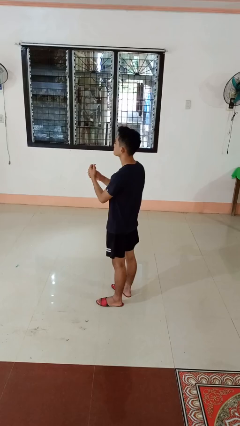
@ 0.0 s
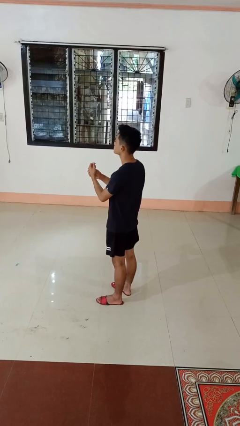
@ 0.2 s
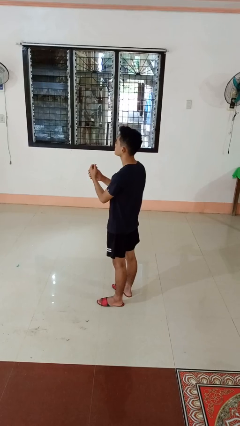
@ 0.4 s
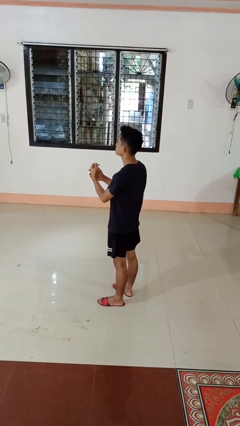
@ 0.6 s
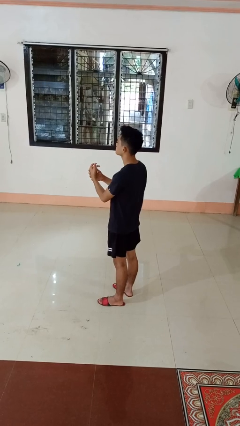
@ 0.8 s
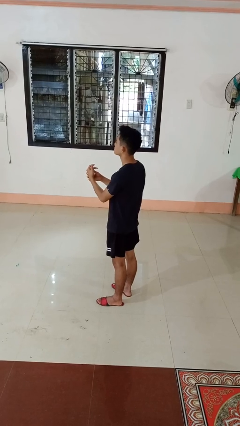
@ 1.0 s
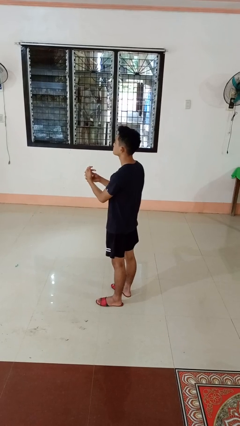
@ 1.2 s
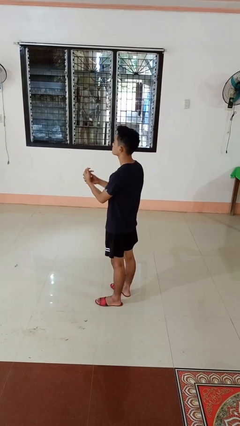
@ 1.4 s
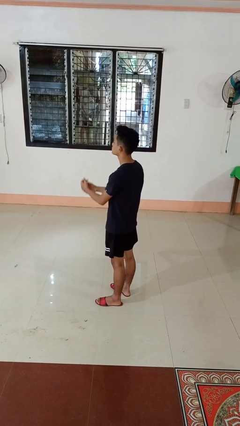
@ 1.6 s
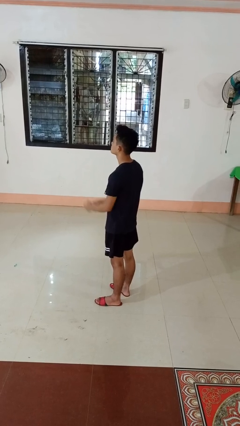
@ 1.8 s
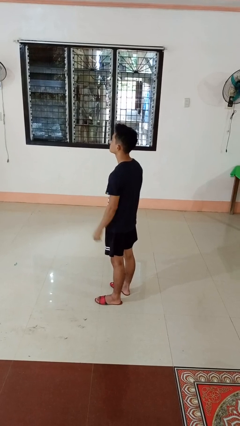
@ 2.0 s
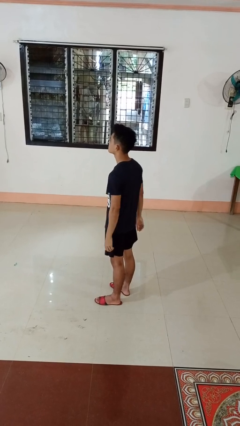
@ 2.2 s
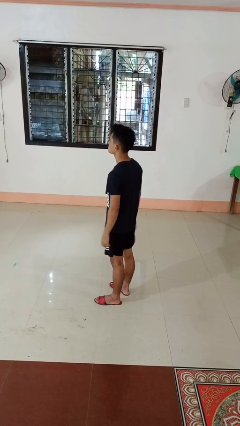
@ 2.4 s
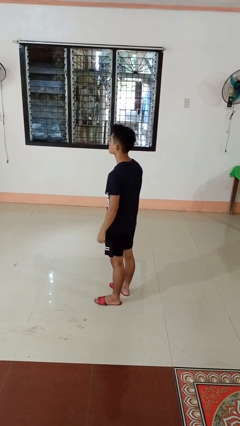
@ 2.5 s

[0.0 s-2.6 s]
person cracks knuckles

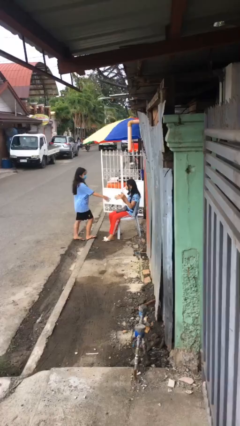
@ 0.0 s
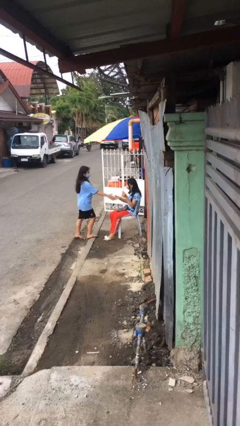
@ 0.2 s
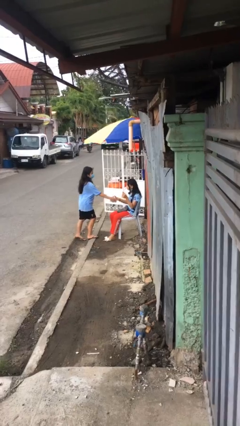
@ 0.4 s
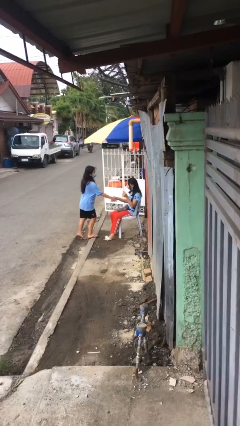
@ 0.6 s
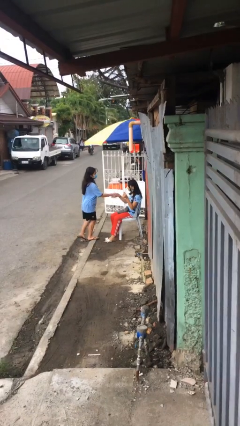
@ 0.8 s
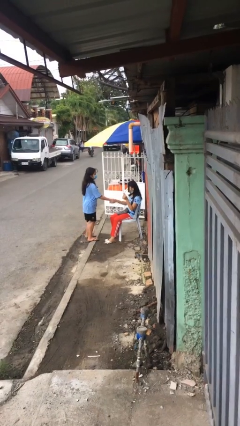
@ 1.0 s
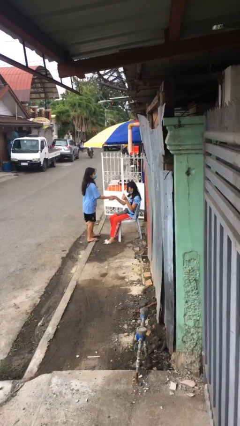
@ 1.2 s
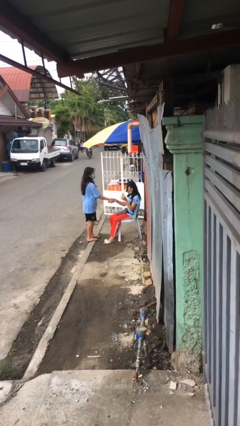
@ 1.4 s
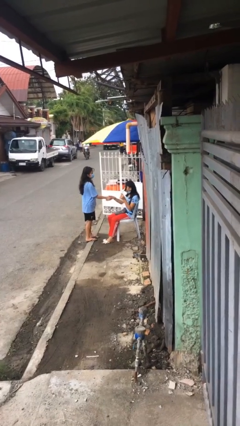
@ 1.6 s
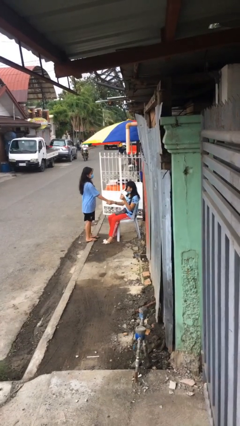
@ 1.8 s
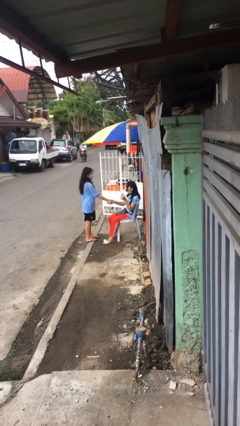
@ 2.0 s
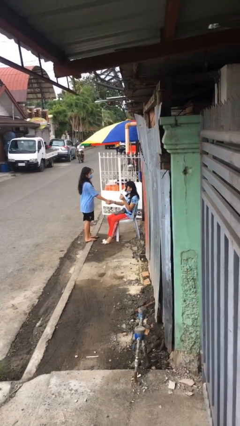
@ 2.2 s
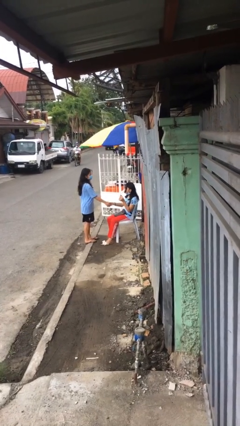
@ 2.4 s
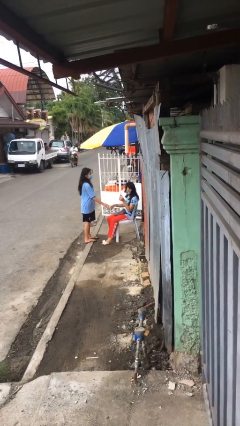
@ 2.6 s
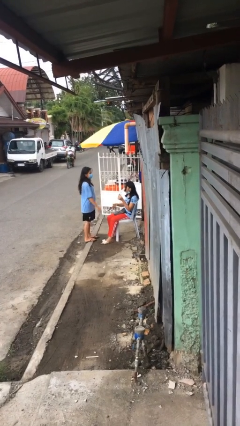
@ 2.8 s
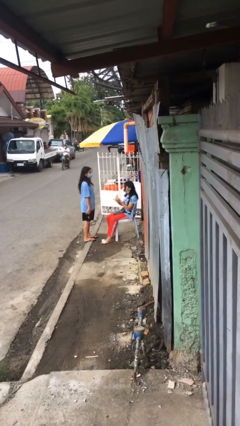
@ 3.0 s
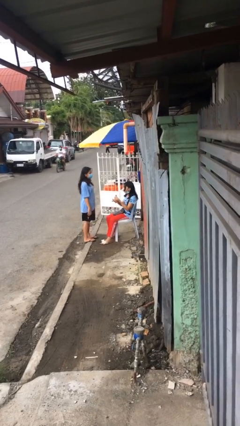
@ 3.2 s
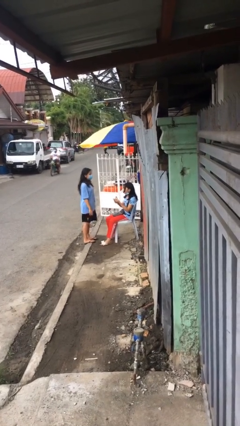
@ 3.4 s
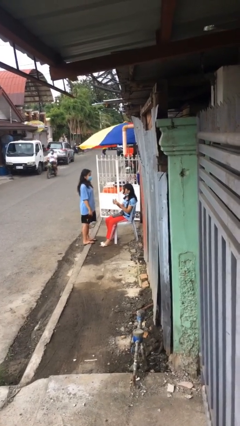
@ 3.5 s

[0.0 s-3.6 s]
person shakes hand

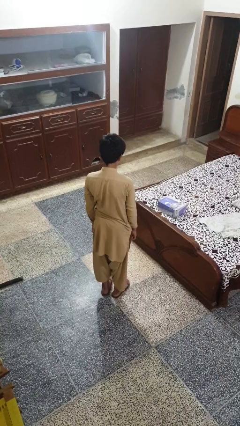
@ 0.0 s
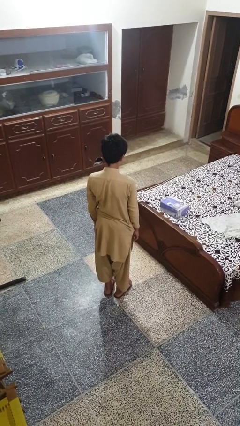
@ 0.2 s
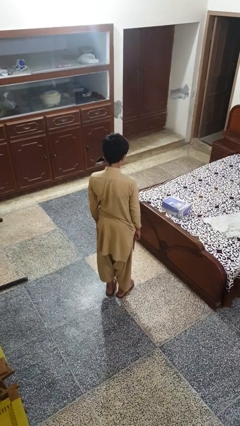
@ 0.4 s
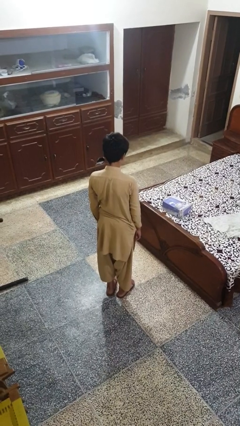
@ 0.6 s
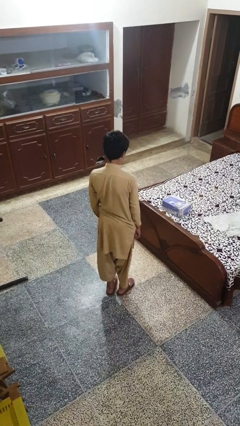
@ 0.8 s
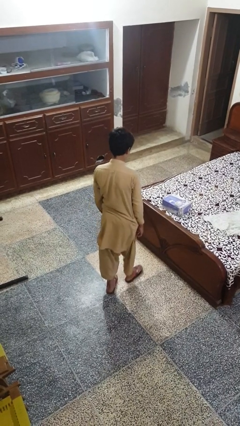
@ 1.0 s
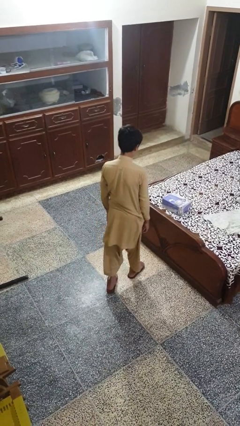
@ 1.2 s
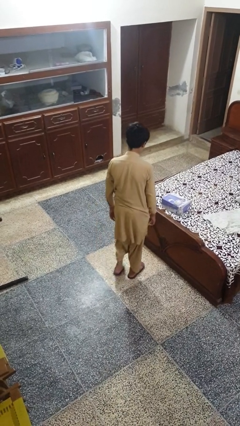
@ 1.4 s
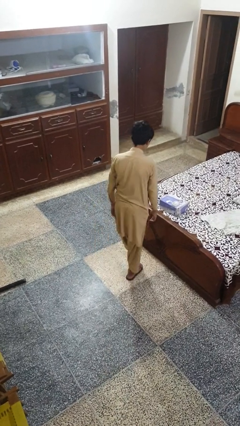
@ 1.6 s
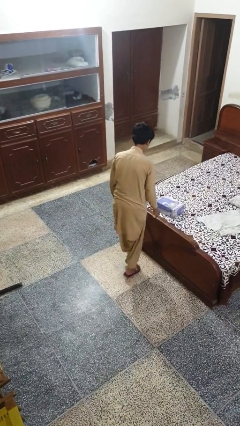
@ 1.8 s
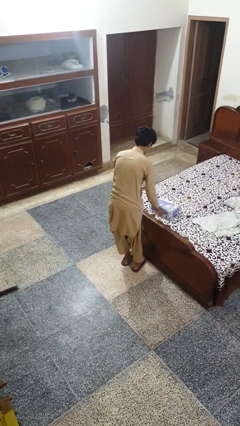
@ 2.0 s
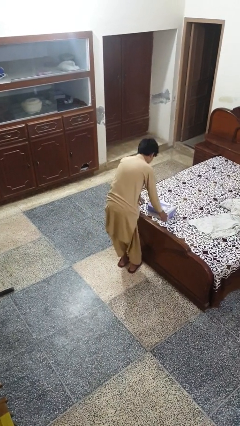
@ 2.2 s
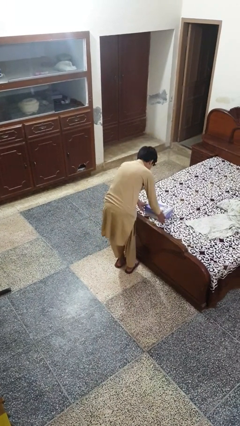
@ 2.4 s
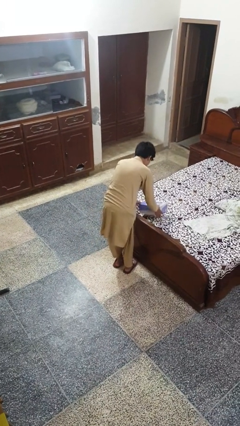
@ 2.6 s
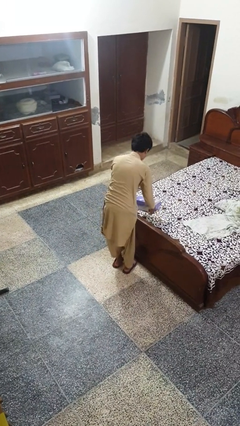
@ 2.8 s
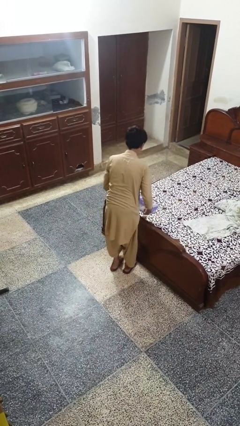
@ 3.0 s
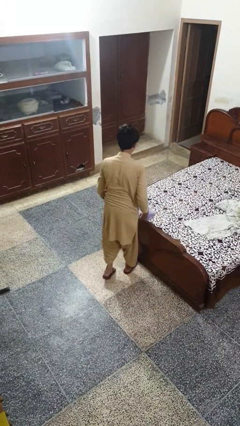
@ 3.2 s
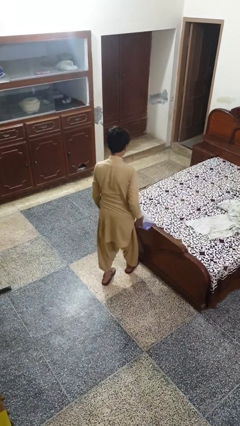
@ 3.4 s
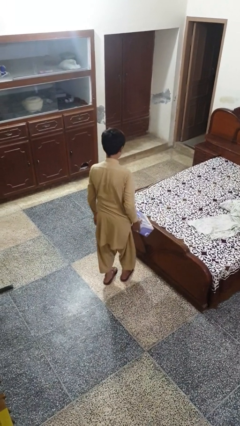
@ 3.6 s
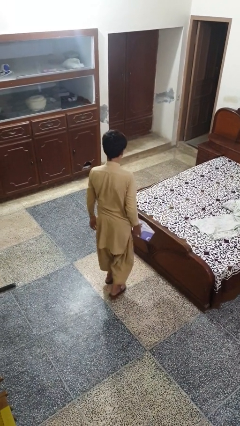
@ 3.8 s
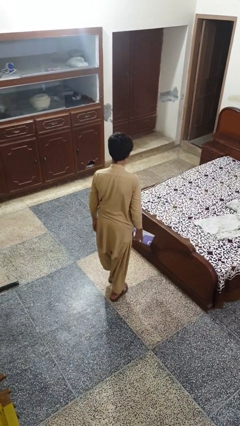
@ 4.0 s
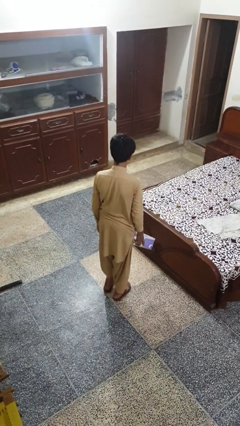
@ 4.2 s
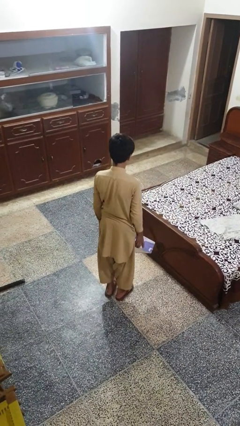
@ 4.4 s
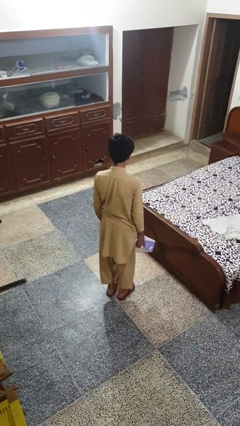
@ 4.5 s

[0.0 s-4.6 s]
person picks up object from bed

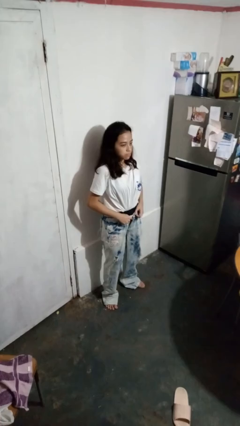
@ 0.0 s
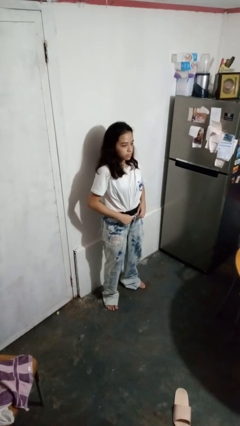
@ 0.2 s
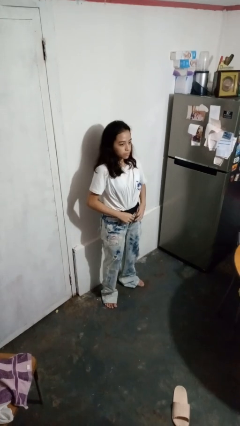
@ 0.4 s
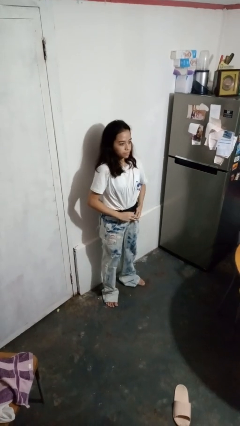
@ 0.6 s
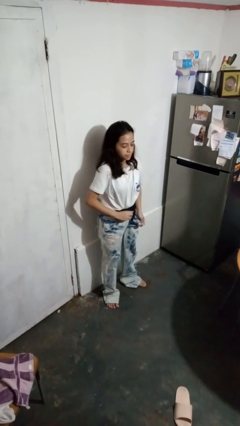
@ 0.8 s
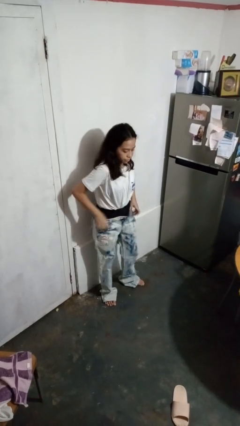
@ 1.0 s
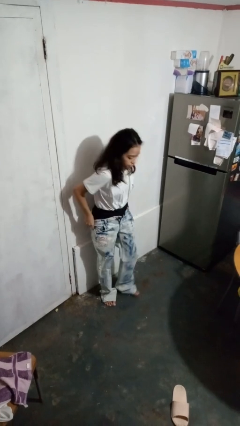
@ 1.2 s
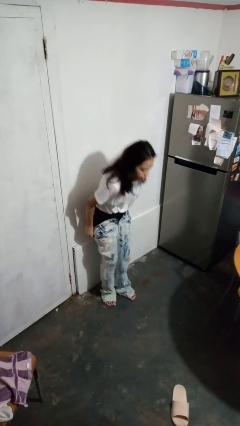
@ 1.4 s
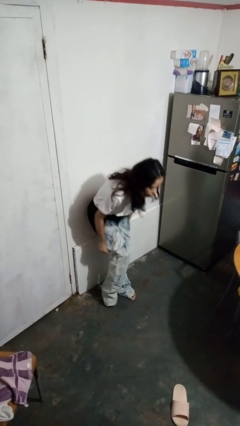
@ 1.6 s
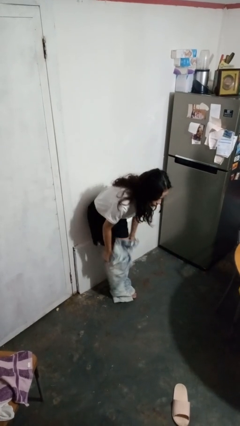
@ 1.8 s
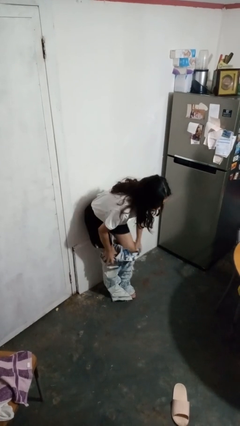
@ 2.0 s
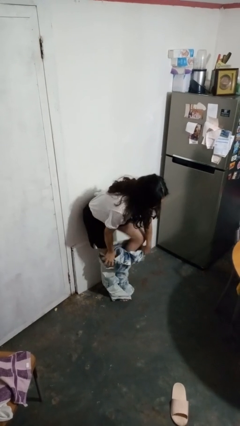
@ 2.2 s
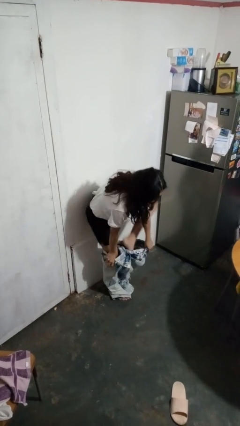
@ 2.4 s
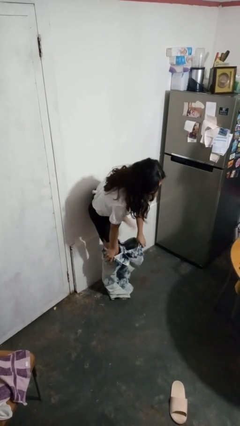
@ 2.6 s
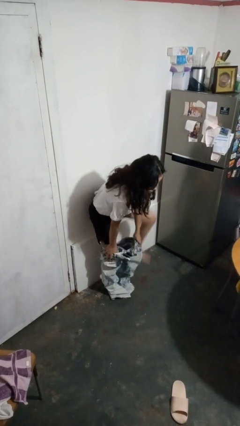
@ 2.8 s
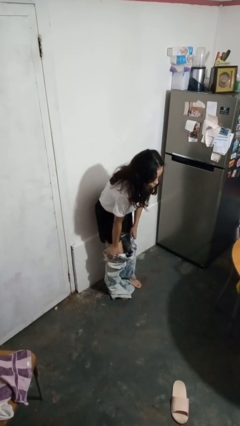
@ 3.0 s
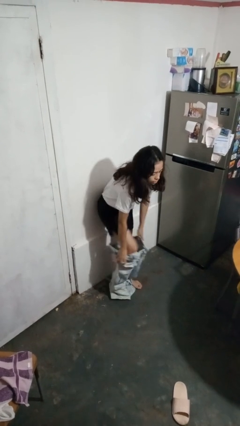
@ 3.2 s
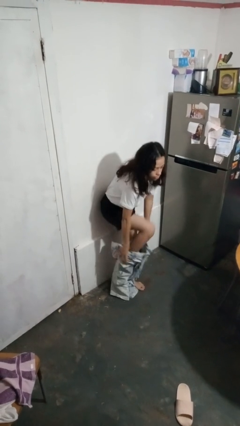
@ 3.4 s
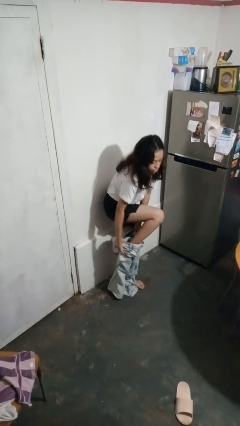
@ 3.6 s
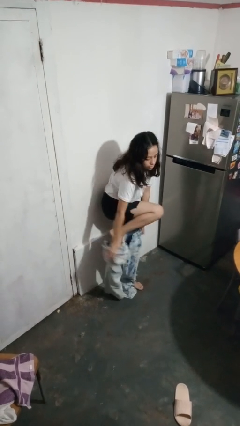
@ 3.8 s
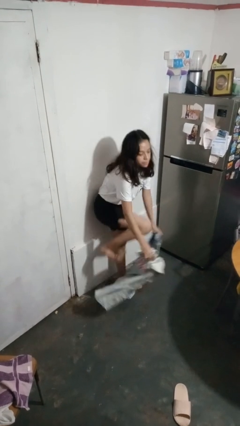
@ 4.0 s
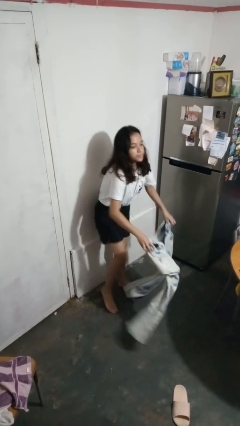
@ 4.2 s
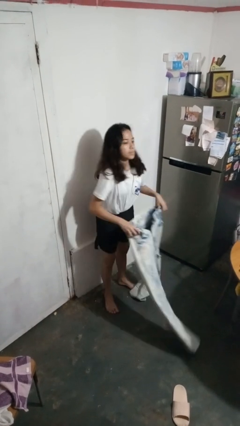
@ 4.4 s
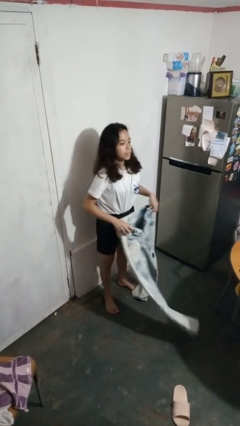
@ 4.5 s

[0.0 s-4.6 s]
person takes off pants

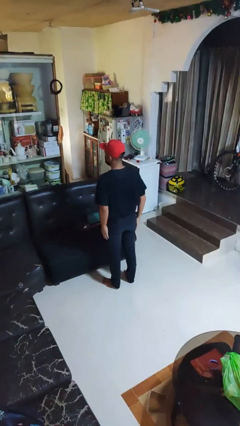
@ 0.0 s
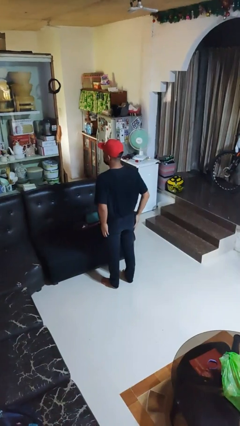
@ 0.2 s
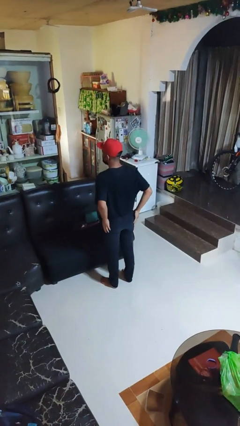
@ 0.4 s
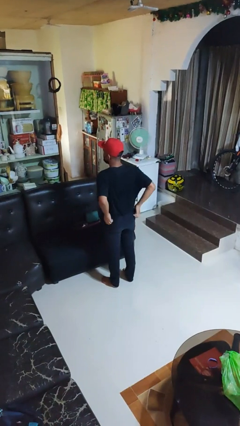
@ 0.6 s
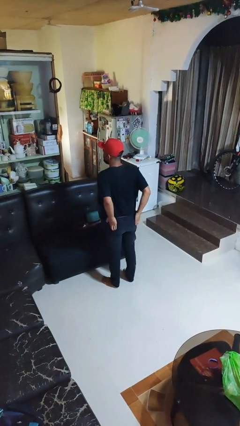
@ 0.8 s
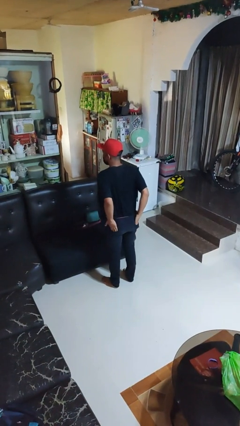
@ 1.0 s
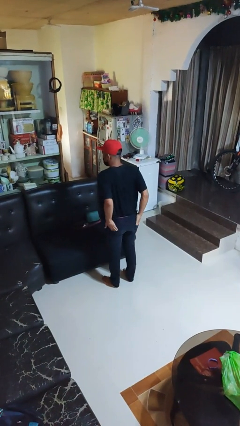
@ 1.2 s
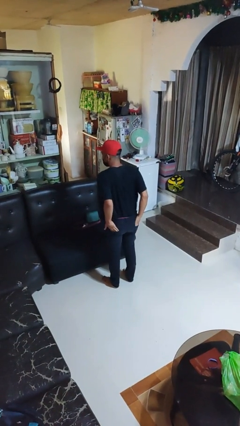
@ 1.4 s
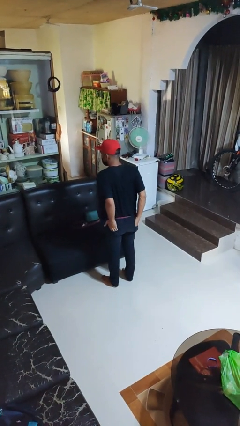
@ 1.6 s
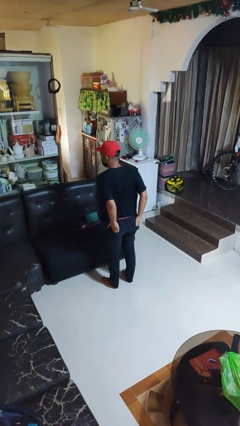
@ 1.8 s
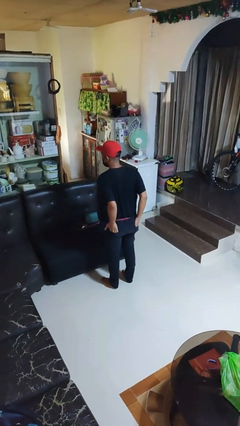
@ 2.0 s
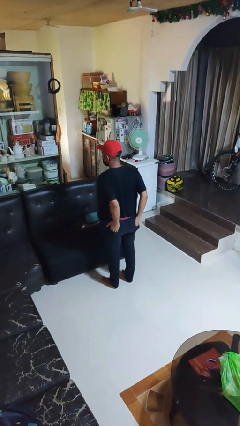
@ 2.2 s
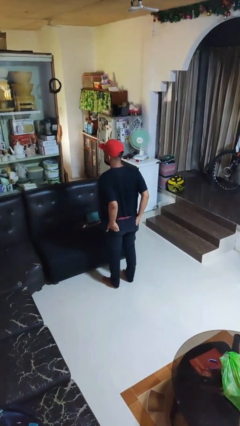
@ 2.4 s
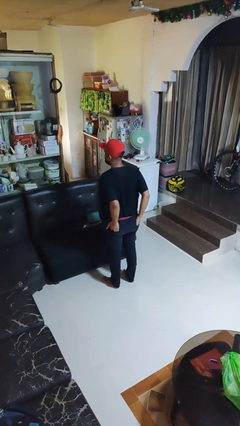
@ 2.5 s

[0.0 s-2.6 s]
person puts hands in back pockets
